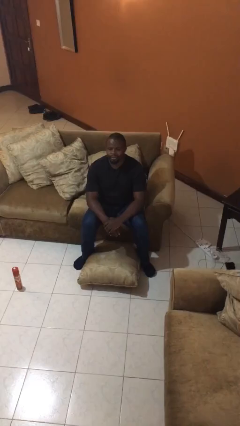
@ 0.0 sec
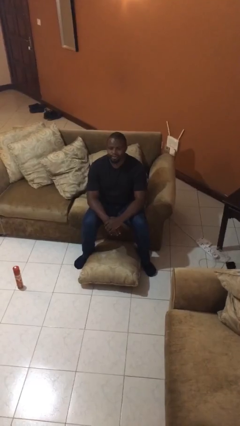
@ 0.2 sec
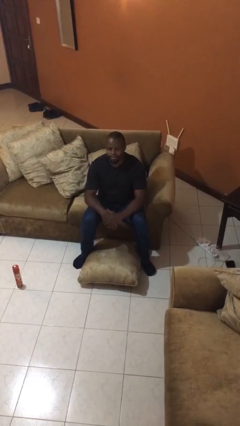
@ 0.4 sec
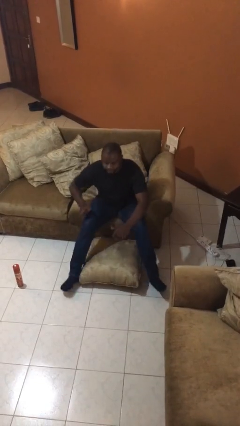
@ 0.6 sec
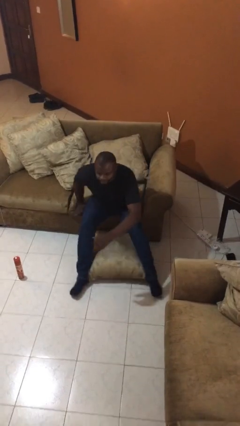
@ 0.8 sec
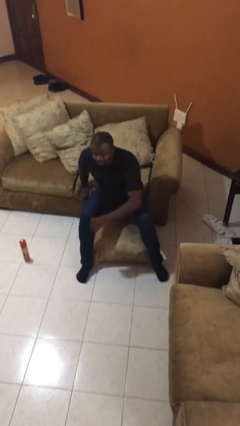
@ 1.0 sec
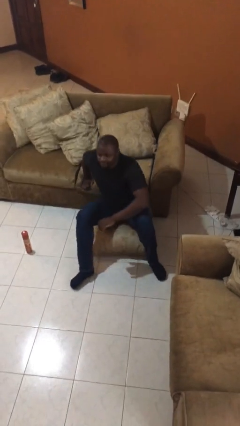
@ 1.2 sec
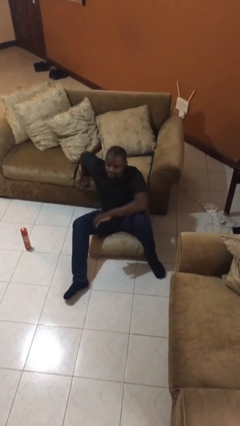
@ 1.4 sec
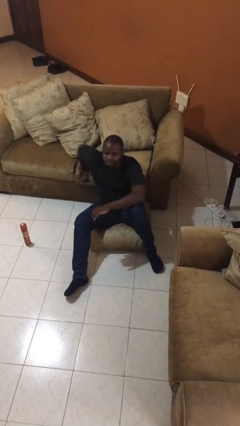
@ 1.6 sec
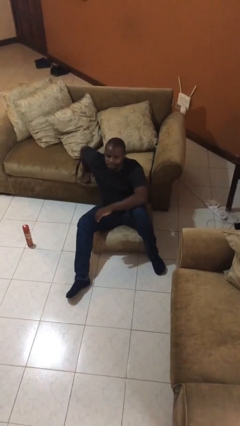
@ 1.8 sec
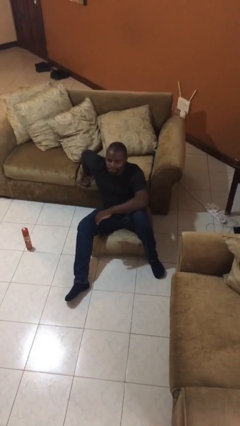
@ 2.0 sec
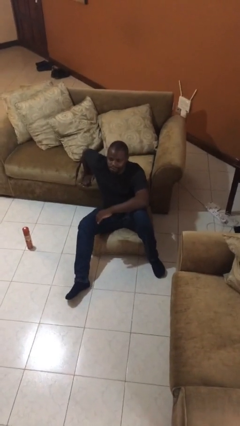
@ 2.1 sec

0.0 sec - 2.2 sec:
person falls from chair

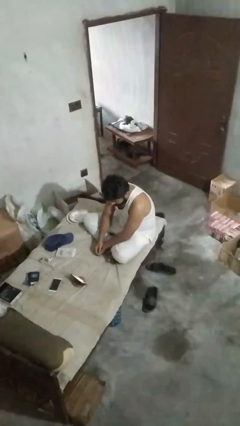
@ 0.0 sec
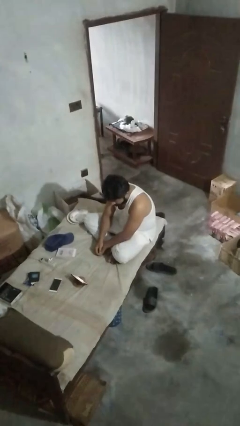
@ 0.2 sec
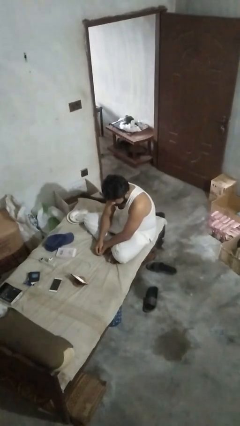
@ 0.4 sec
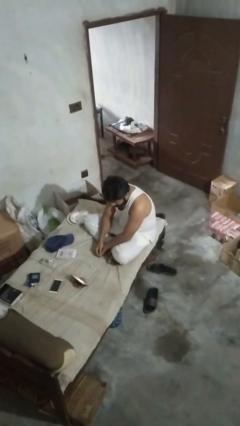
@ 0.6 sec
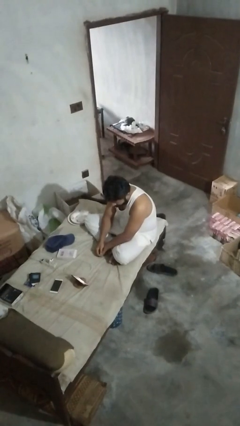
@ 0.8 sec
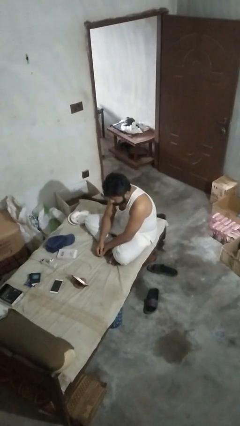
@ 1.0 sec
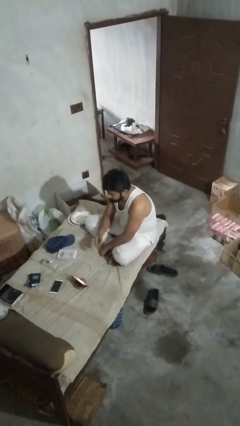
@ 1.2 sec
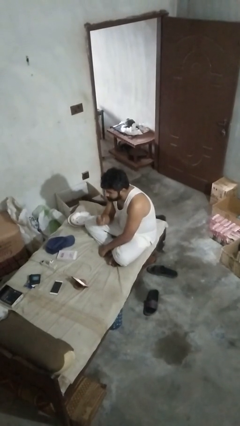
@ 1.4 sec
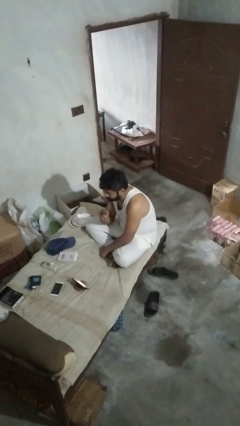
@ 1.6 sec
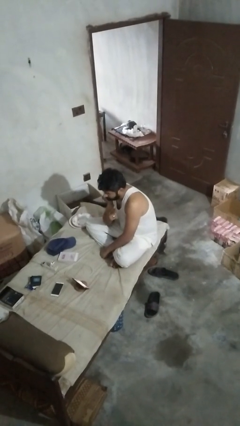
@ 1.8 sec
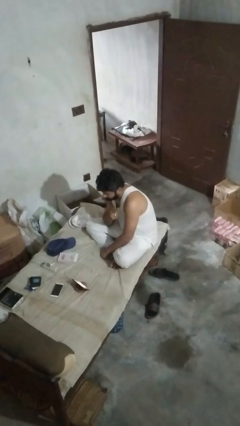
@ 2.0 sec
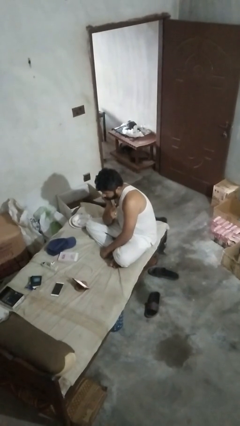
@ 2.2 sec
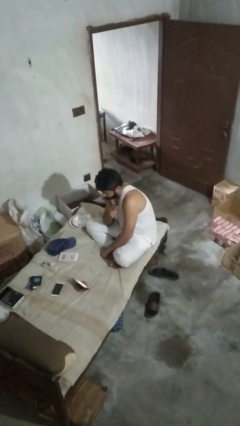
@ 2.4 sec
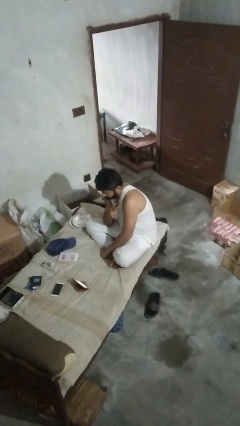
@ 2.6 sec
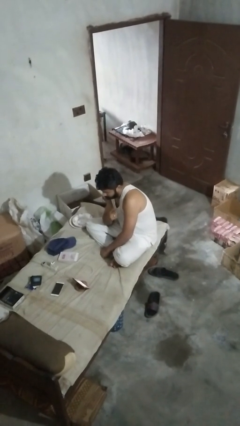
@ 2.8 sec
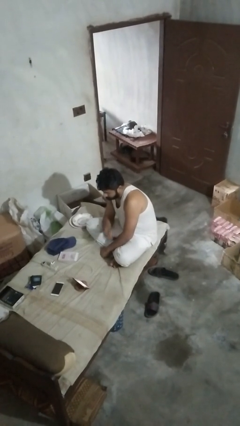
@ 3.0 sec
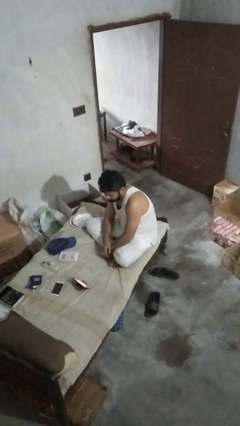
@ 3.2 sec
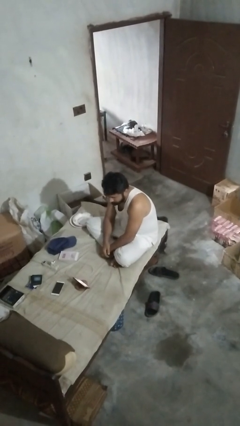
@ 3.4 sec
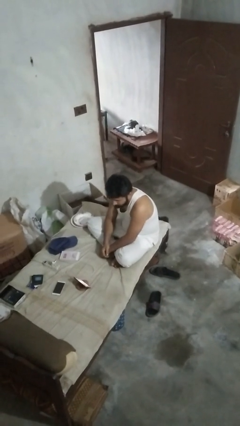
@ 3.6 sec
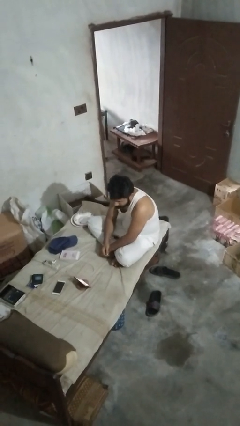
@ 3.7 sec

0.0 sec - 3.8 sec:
person gestures peace

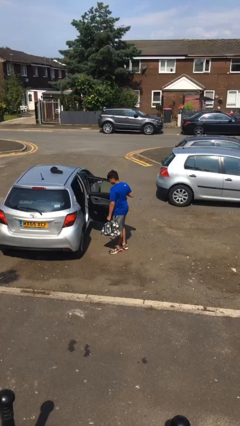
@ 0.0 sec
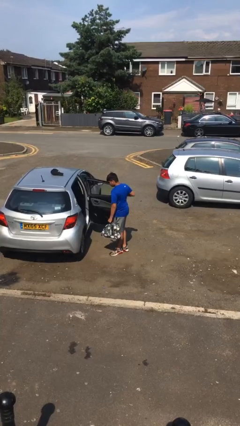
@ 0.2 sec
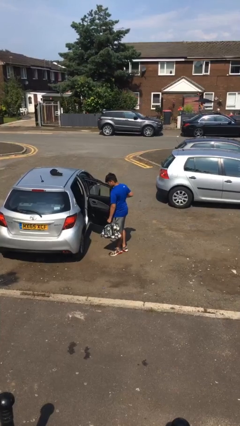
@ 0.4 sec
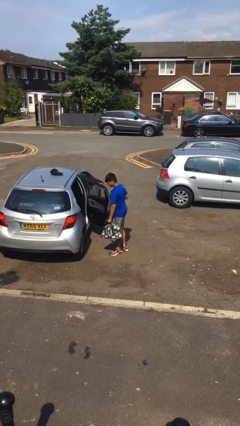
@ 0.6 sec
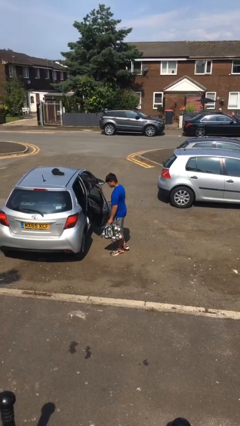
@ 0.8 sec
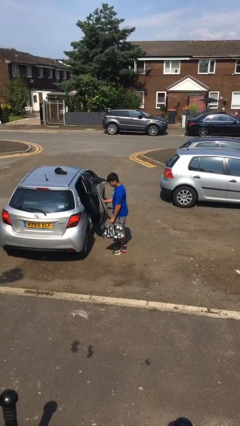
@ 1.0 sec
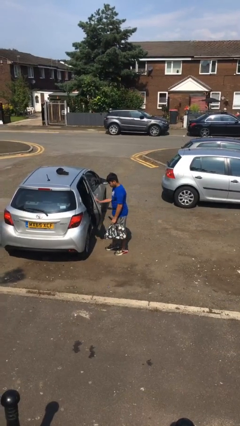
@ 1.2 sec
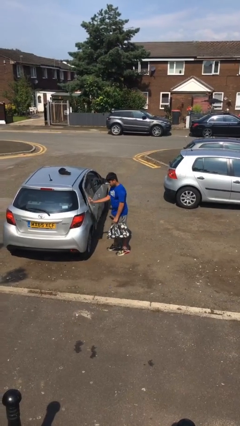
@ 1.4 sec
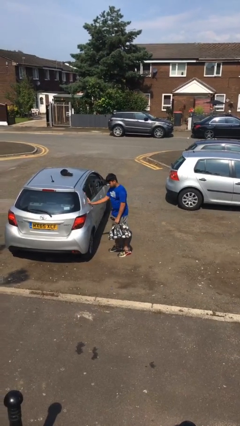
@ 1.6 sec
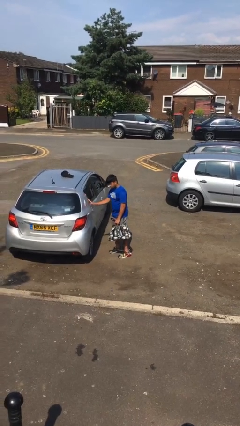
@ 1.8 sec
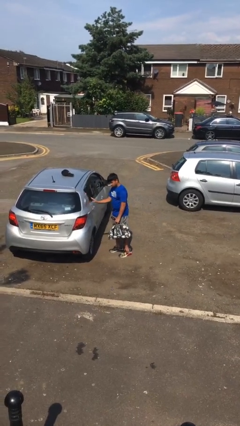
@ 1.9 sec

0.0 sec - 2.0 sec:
person closes car door

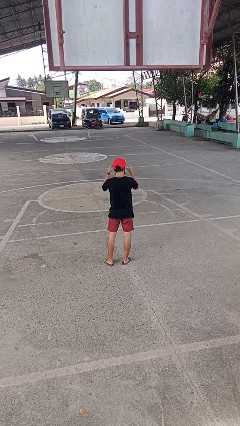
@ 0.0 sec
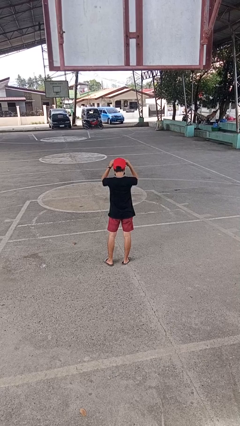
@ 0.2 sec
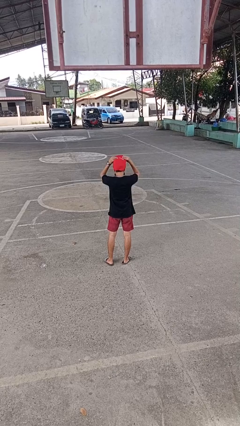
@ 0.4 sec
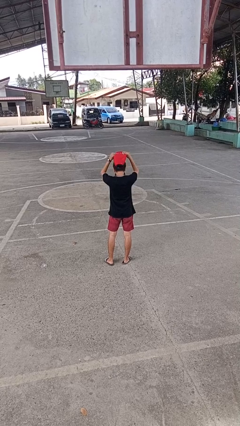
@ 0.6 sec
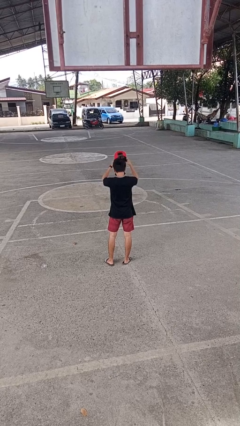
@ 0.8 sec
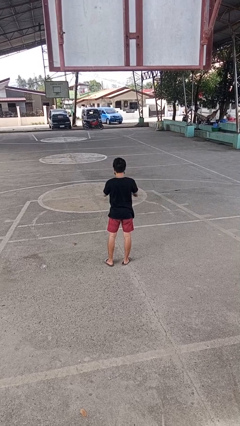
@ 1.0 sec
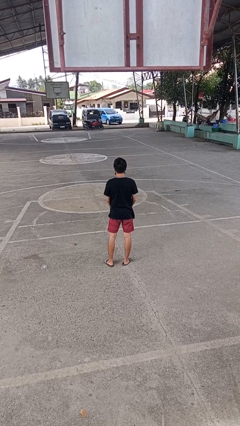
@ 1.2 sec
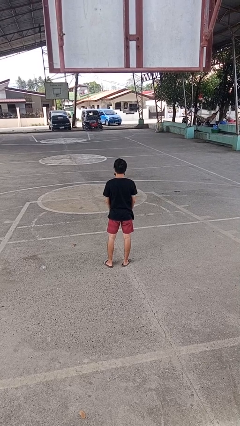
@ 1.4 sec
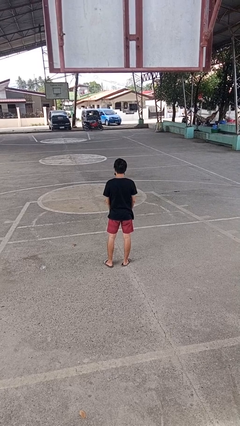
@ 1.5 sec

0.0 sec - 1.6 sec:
person takes off hat

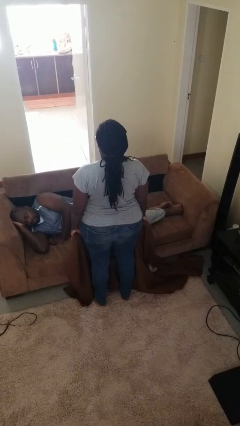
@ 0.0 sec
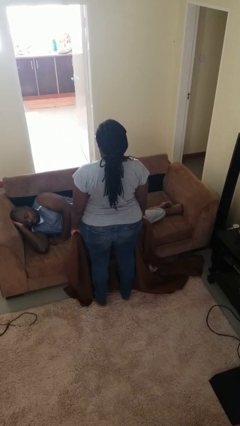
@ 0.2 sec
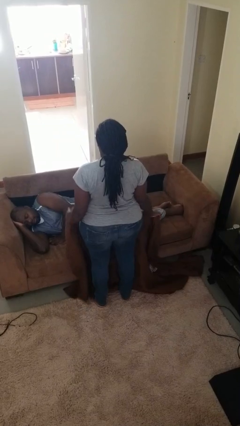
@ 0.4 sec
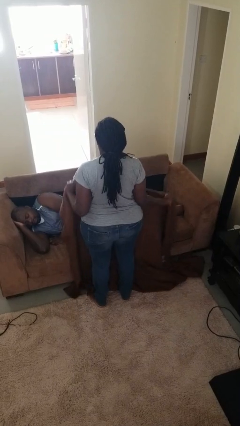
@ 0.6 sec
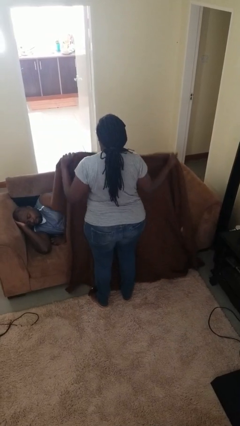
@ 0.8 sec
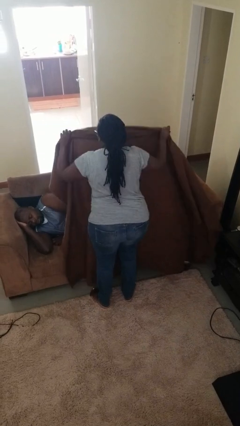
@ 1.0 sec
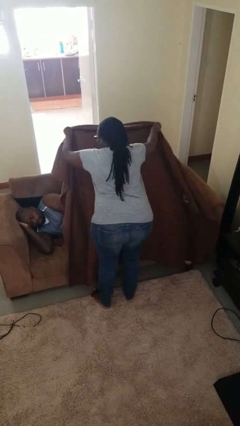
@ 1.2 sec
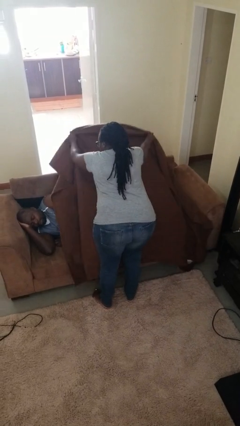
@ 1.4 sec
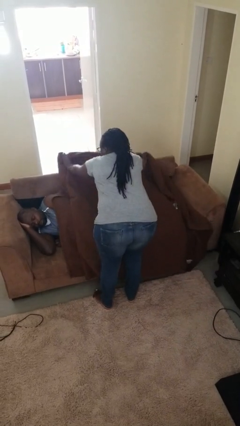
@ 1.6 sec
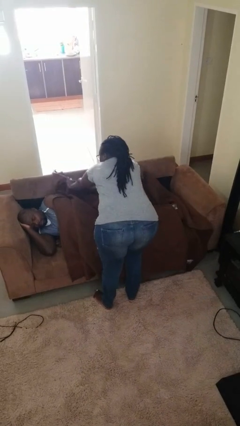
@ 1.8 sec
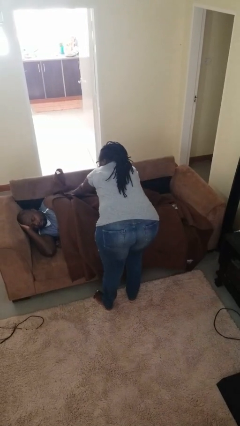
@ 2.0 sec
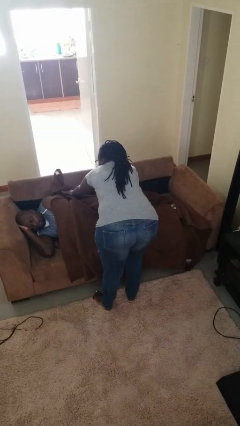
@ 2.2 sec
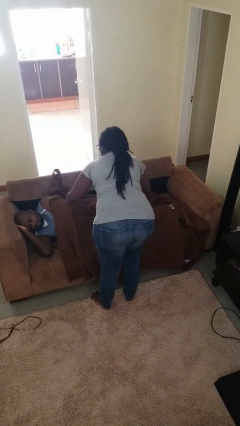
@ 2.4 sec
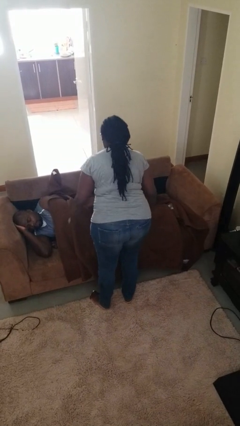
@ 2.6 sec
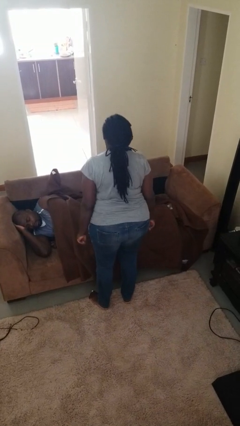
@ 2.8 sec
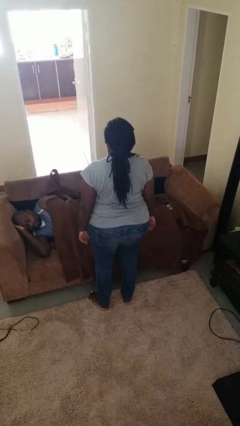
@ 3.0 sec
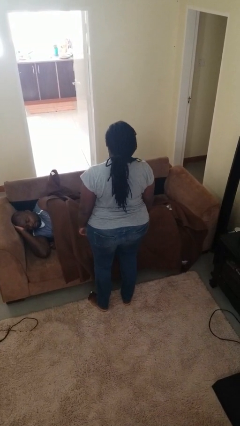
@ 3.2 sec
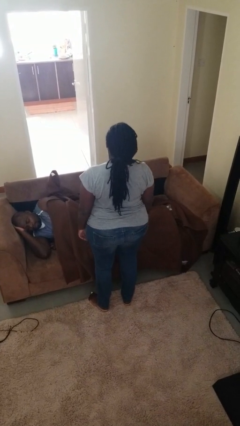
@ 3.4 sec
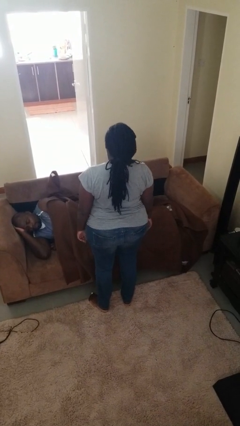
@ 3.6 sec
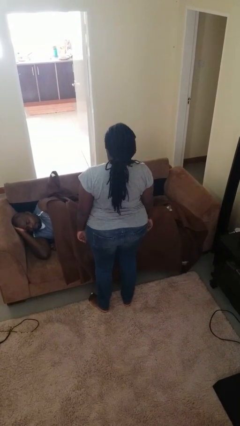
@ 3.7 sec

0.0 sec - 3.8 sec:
person covers friend with blanket

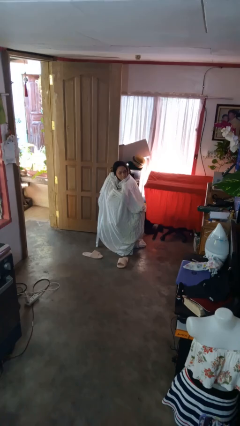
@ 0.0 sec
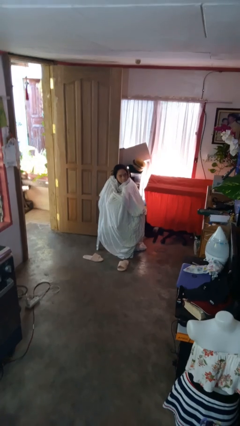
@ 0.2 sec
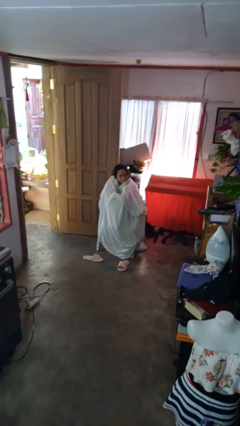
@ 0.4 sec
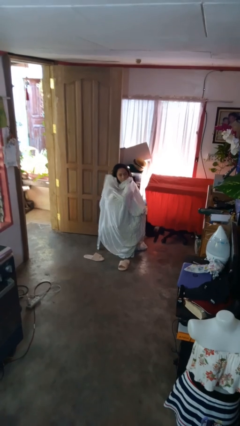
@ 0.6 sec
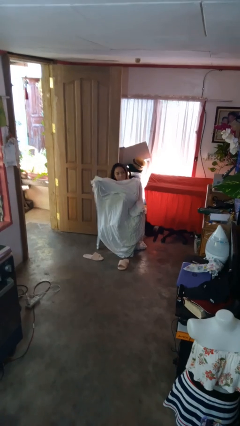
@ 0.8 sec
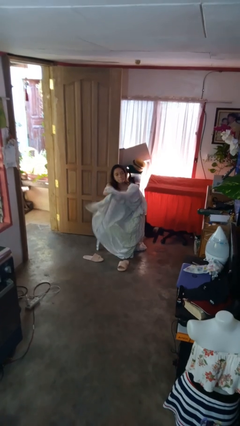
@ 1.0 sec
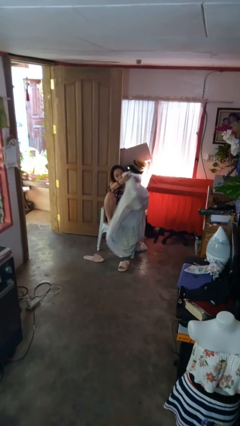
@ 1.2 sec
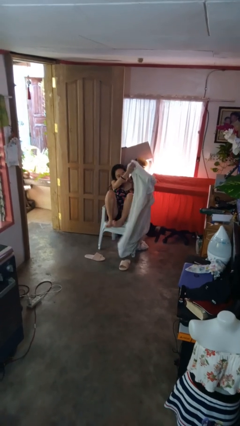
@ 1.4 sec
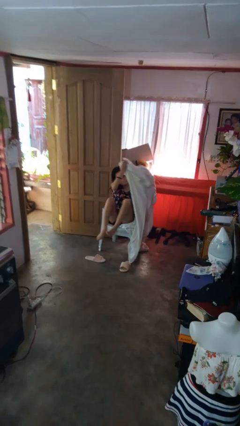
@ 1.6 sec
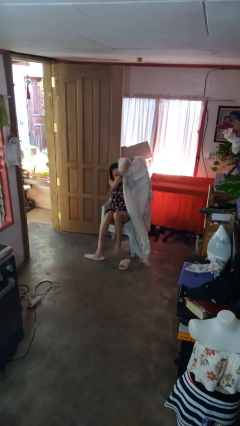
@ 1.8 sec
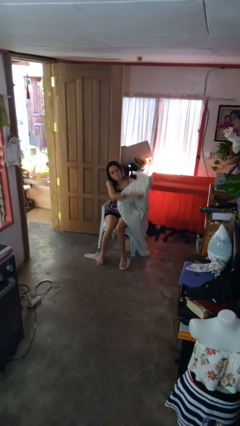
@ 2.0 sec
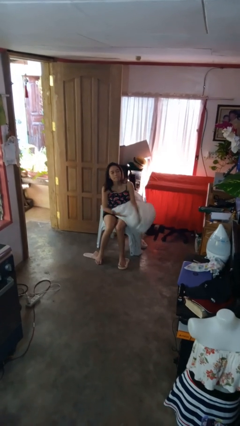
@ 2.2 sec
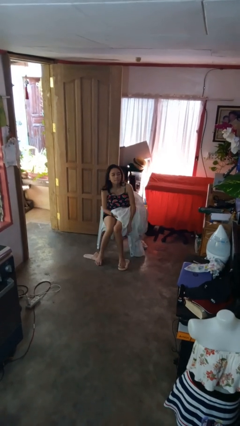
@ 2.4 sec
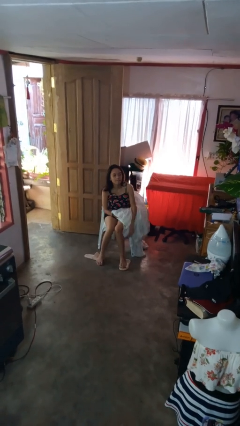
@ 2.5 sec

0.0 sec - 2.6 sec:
person uncovers with blanket

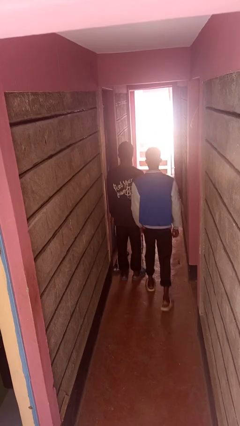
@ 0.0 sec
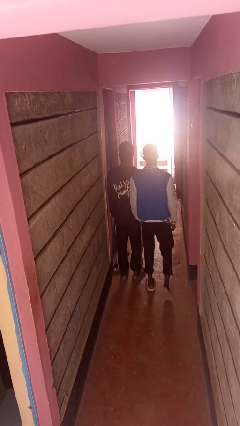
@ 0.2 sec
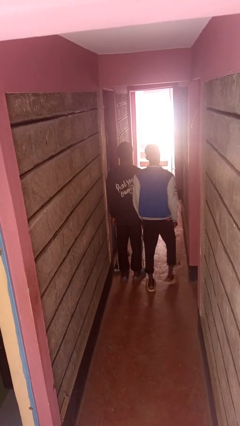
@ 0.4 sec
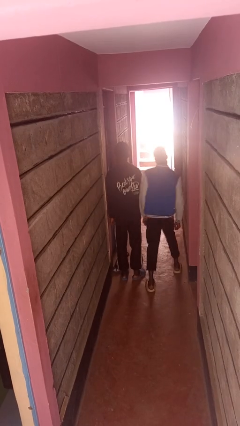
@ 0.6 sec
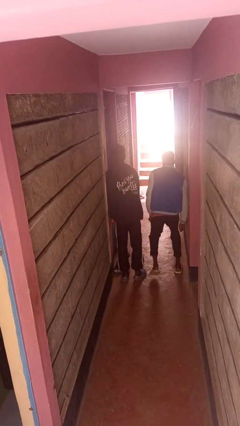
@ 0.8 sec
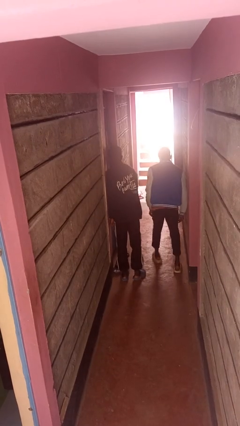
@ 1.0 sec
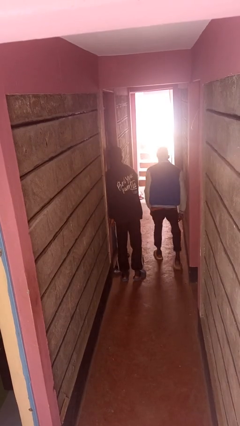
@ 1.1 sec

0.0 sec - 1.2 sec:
person bumps into person
